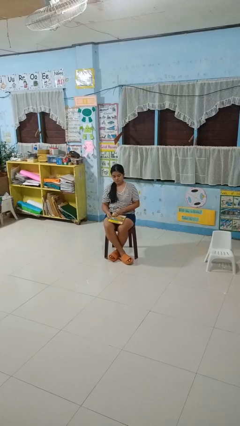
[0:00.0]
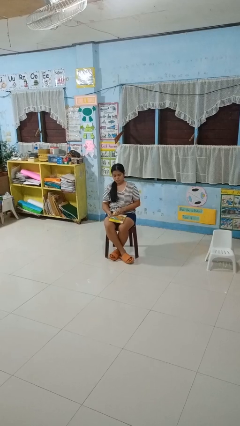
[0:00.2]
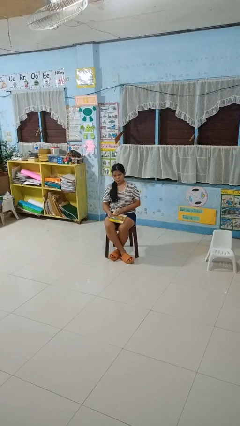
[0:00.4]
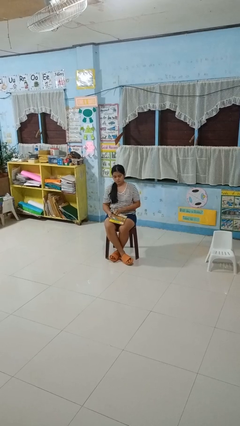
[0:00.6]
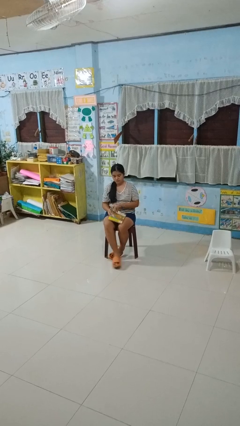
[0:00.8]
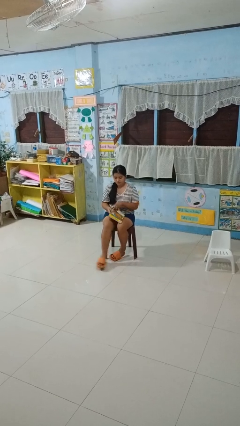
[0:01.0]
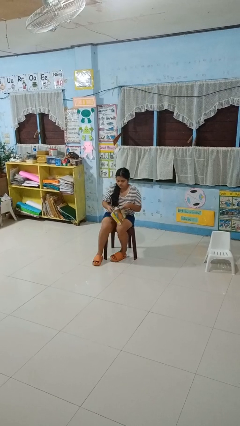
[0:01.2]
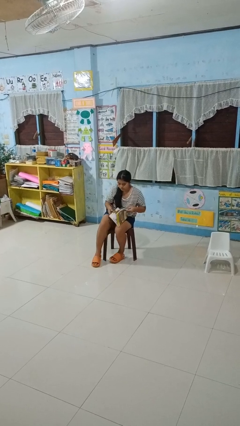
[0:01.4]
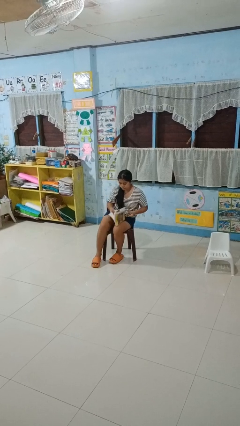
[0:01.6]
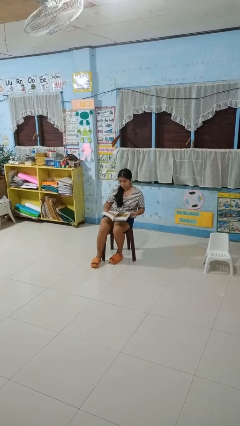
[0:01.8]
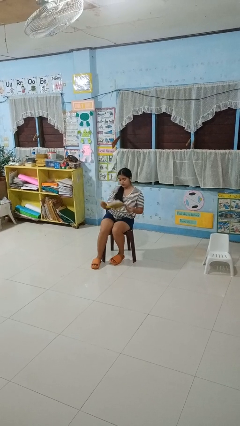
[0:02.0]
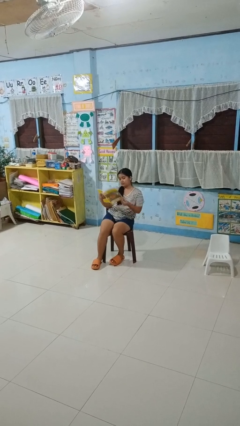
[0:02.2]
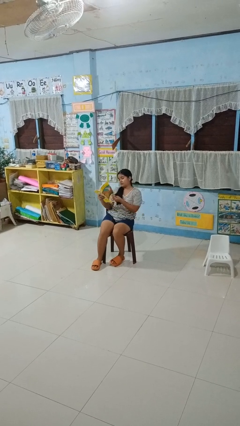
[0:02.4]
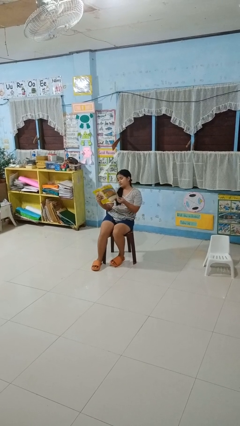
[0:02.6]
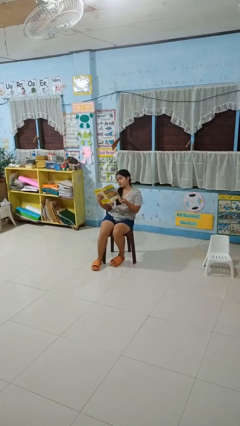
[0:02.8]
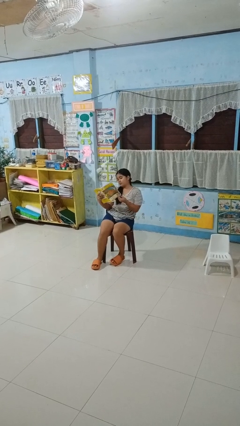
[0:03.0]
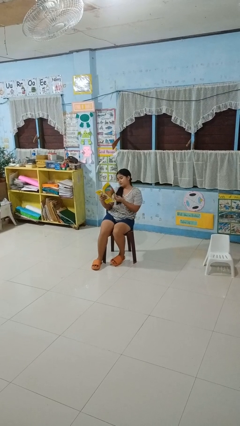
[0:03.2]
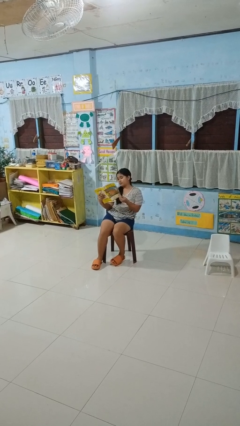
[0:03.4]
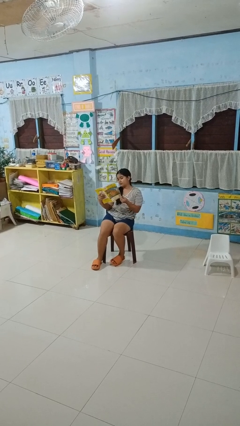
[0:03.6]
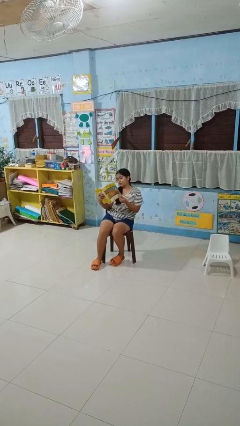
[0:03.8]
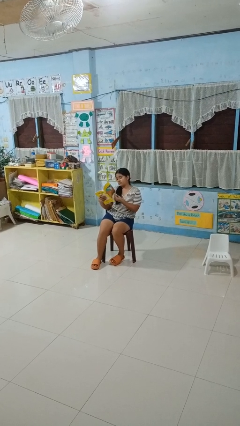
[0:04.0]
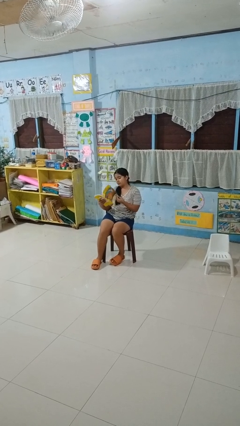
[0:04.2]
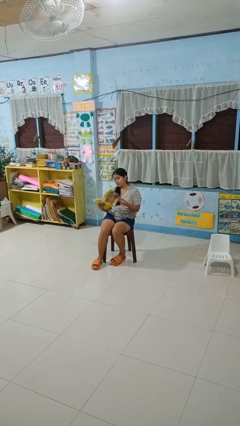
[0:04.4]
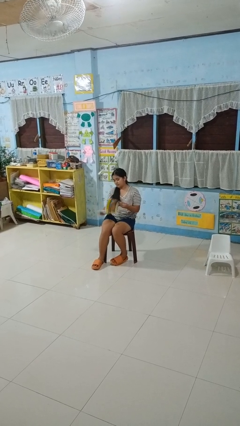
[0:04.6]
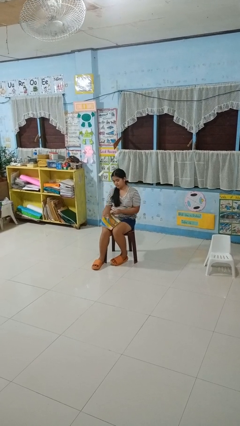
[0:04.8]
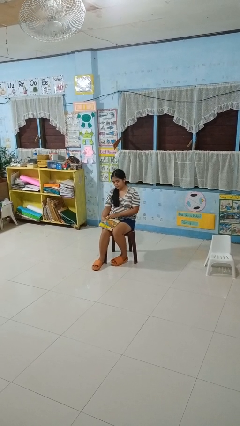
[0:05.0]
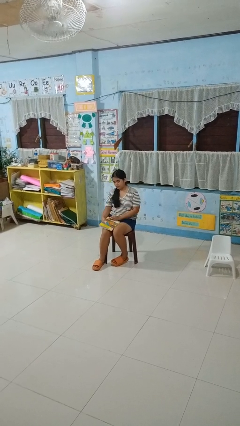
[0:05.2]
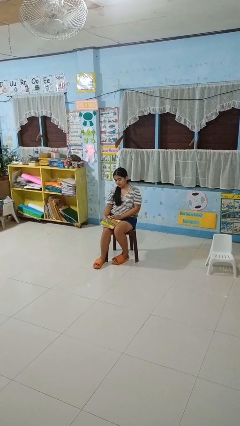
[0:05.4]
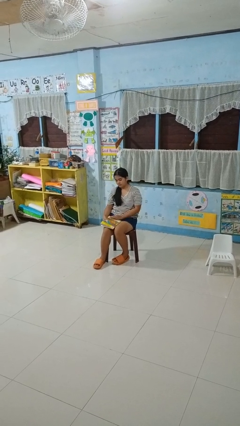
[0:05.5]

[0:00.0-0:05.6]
person reads book

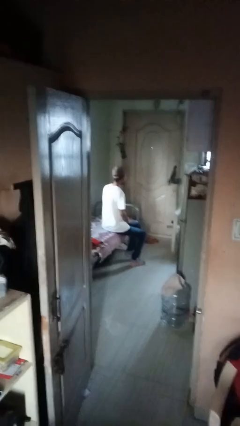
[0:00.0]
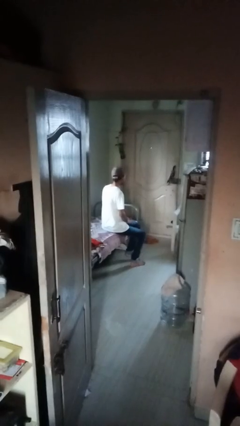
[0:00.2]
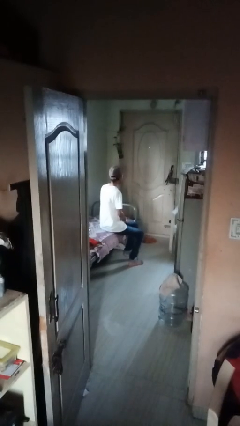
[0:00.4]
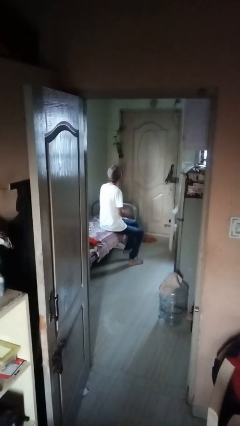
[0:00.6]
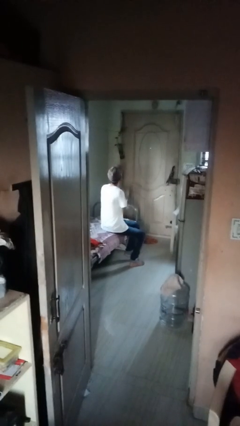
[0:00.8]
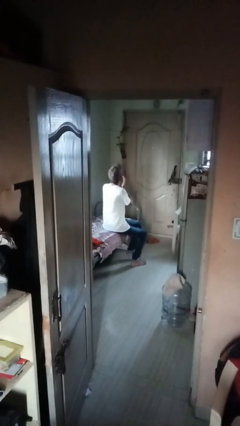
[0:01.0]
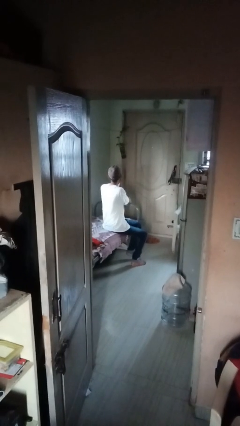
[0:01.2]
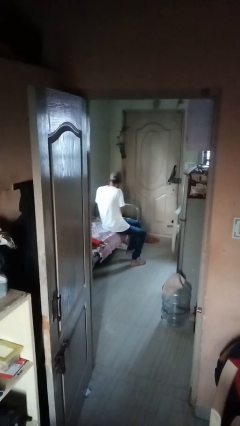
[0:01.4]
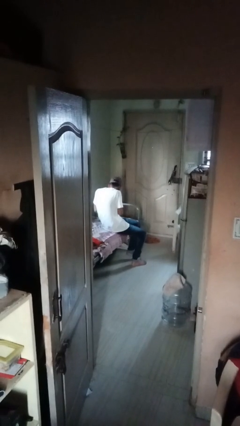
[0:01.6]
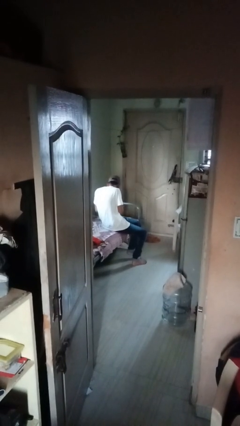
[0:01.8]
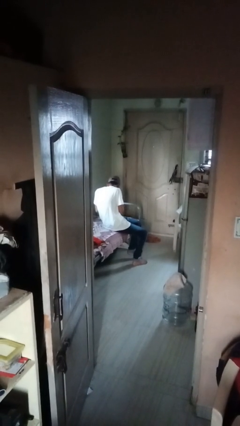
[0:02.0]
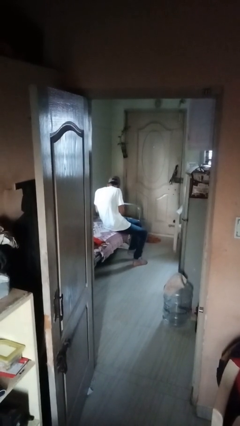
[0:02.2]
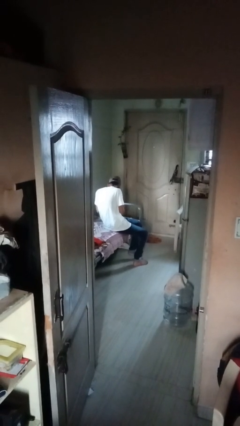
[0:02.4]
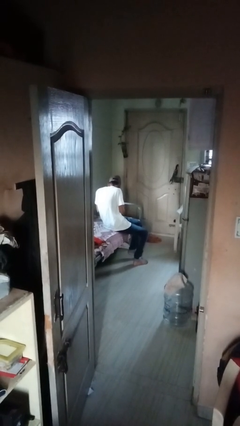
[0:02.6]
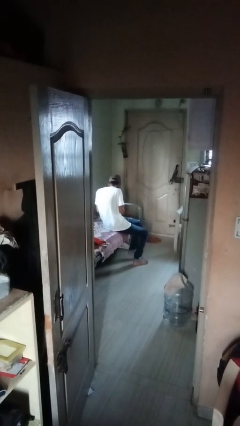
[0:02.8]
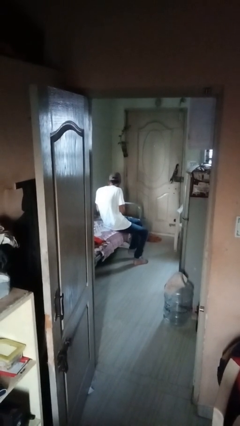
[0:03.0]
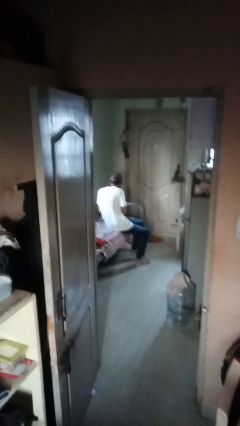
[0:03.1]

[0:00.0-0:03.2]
person sneezes into hand

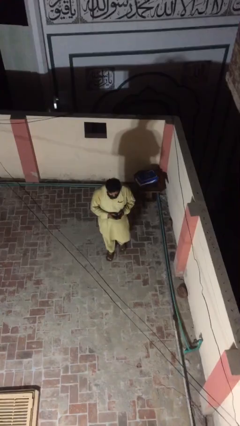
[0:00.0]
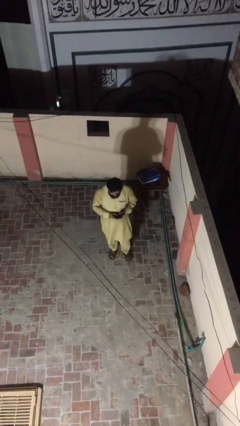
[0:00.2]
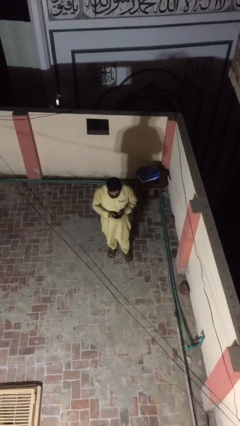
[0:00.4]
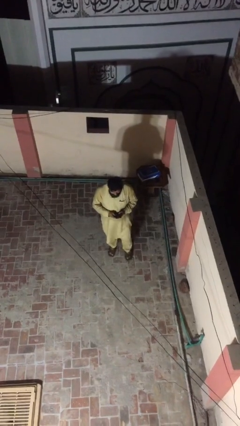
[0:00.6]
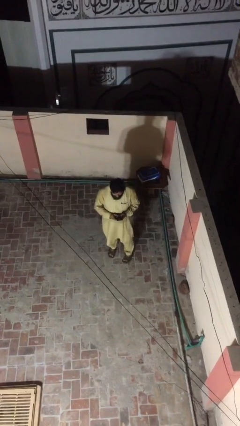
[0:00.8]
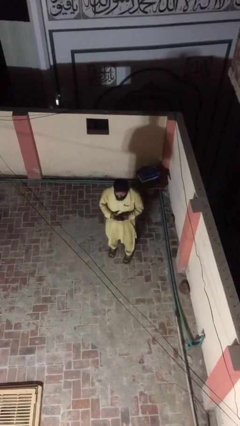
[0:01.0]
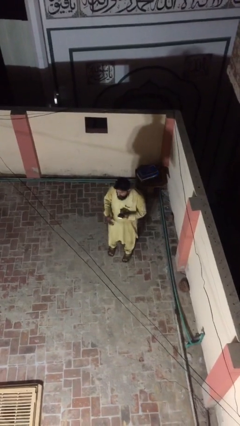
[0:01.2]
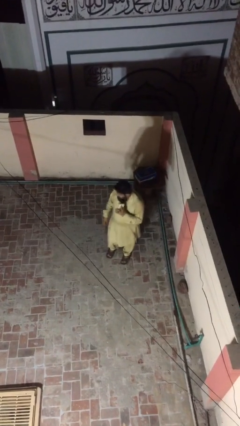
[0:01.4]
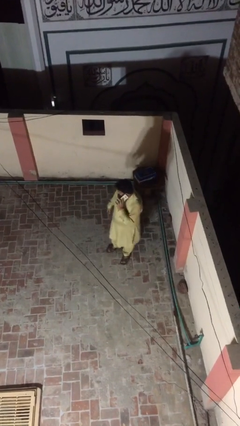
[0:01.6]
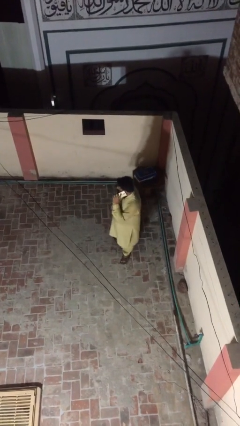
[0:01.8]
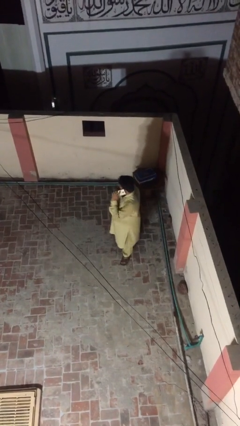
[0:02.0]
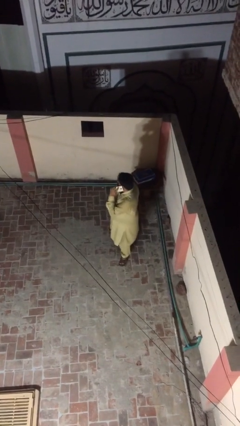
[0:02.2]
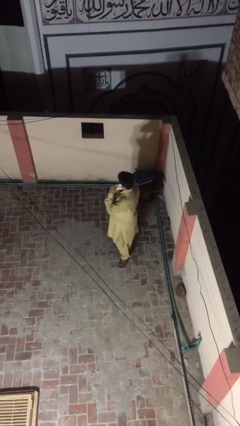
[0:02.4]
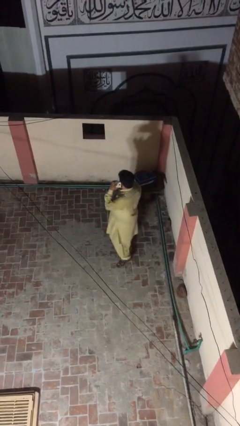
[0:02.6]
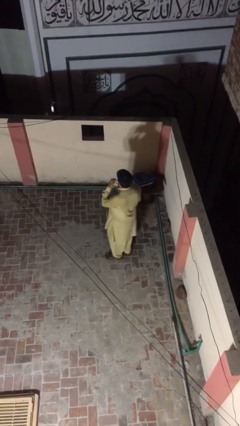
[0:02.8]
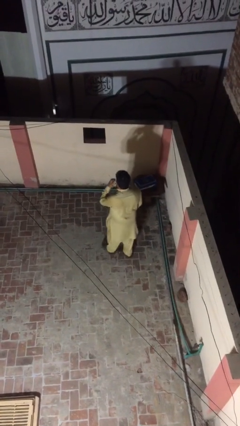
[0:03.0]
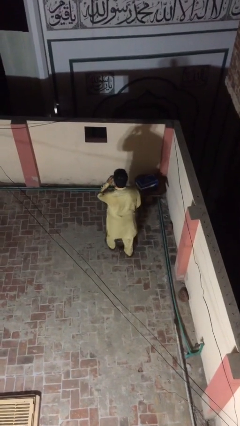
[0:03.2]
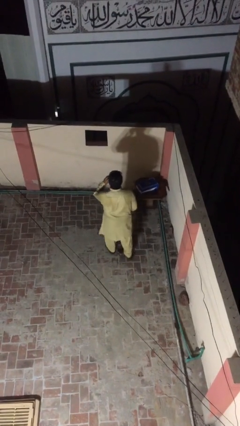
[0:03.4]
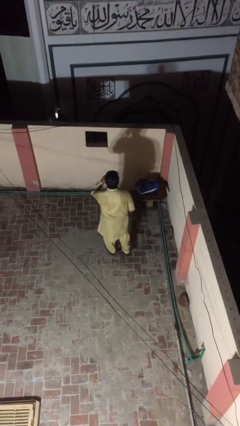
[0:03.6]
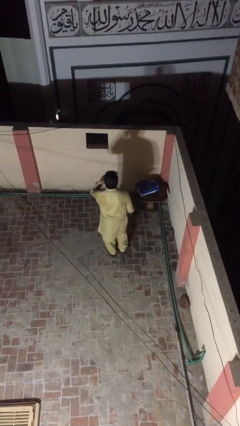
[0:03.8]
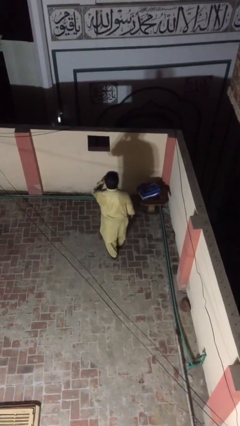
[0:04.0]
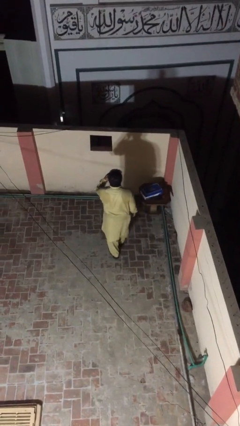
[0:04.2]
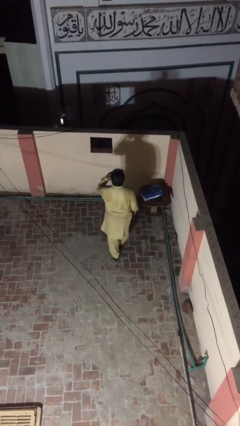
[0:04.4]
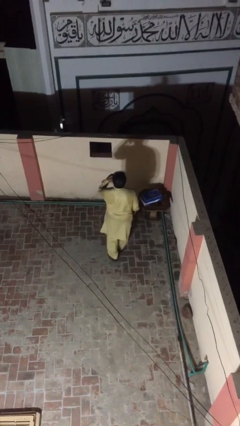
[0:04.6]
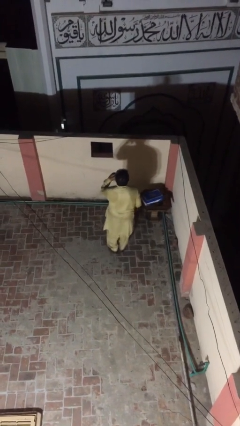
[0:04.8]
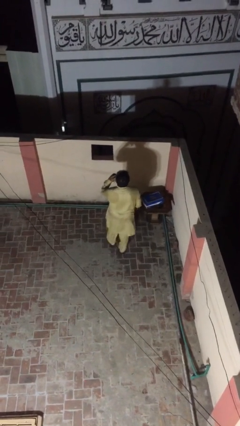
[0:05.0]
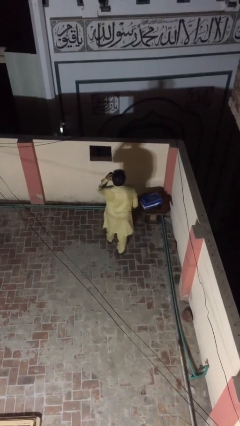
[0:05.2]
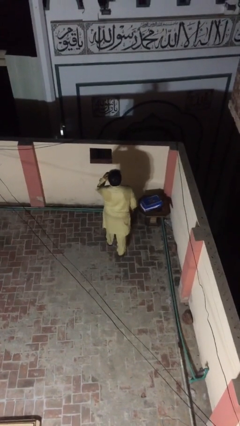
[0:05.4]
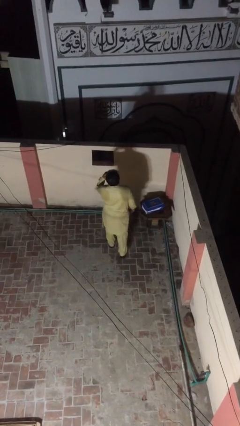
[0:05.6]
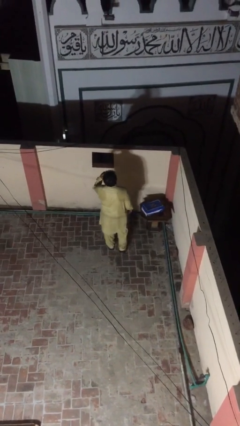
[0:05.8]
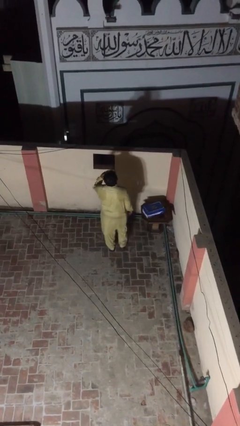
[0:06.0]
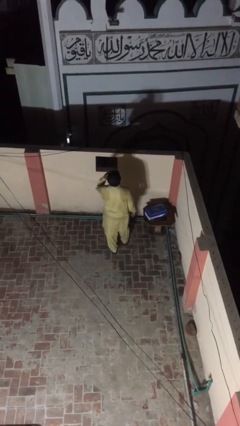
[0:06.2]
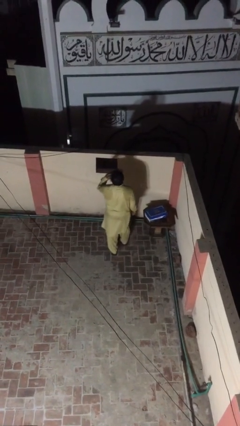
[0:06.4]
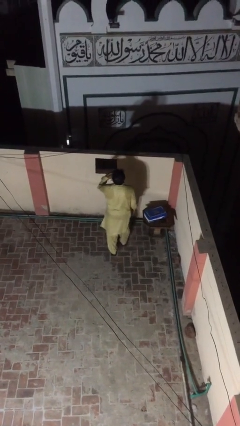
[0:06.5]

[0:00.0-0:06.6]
person talks on phone

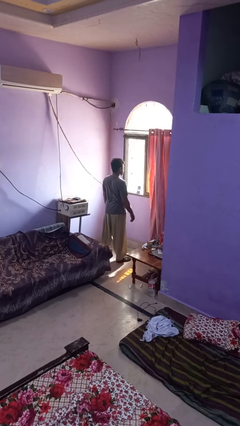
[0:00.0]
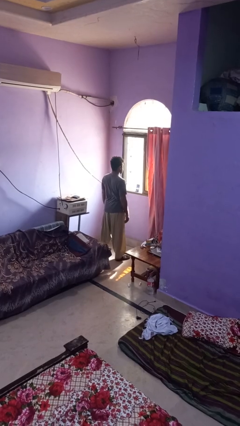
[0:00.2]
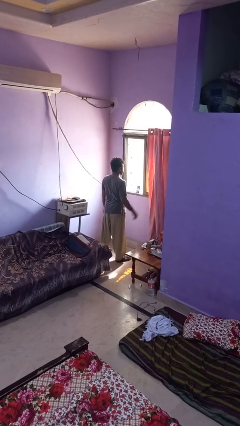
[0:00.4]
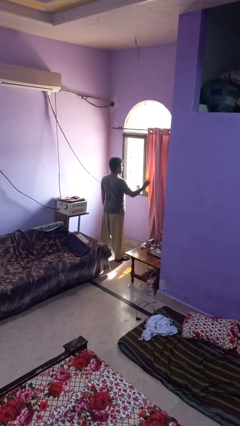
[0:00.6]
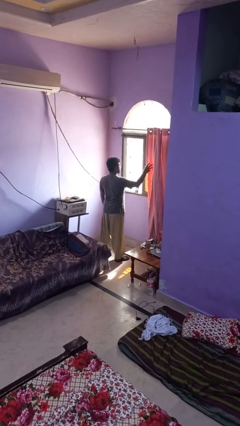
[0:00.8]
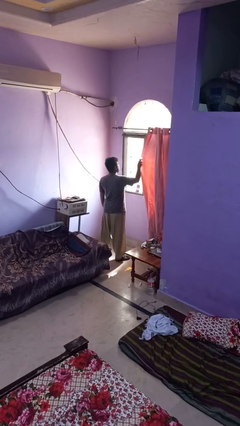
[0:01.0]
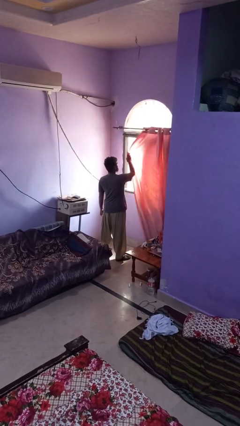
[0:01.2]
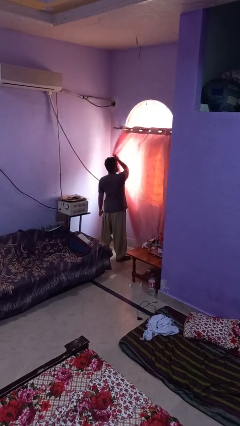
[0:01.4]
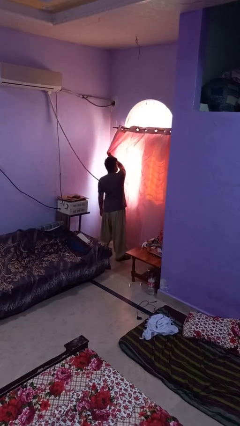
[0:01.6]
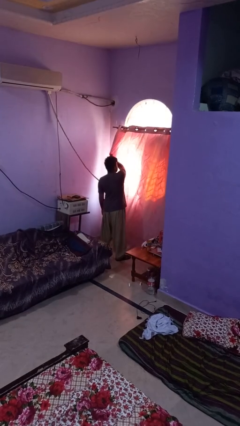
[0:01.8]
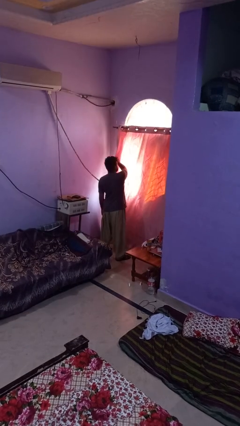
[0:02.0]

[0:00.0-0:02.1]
person closes curtains
